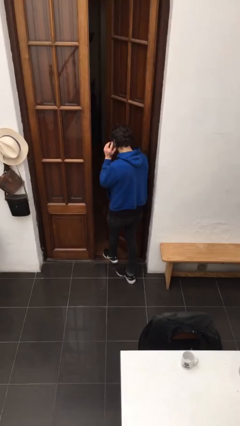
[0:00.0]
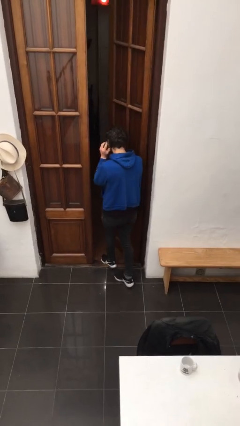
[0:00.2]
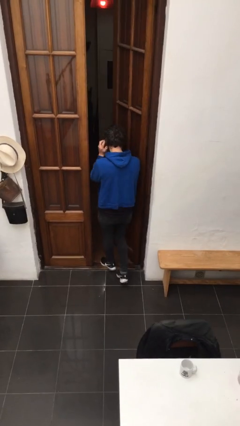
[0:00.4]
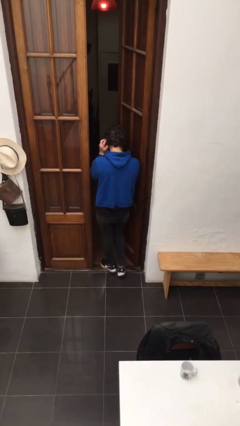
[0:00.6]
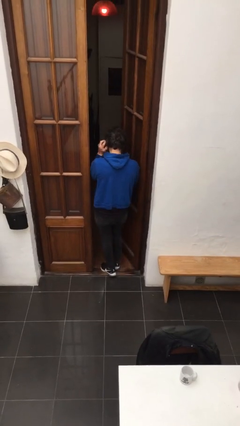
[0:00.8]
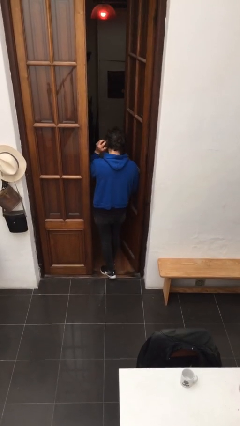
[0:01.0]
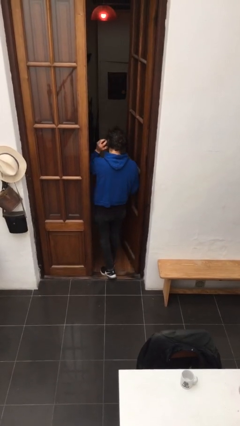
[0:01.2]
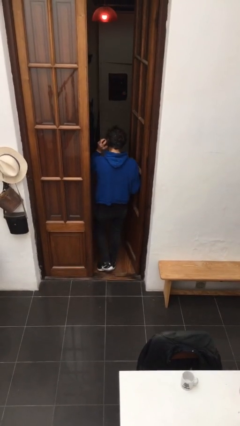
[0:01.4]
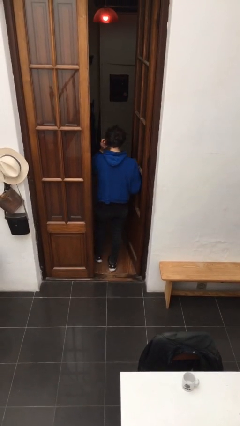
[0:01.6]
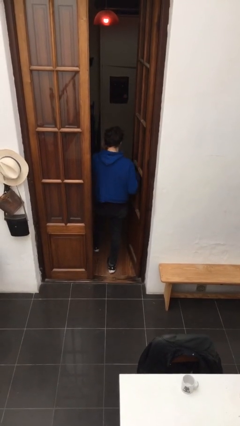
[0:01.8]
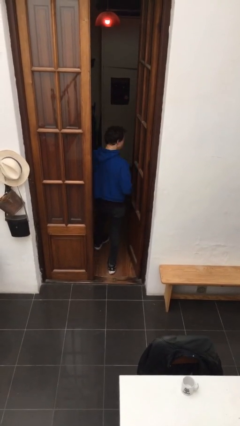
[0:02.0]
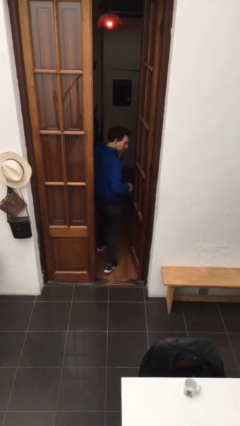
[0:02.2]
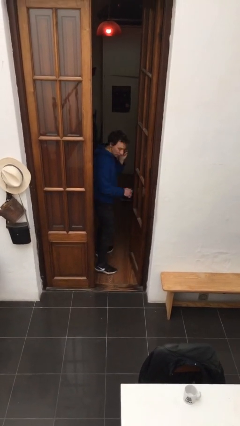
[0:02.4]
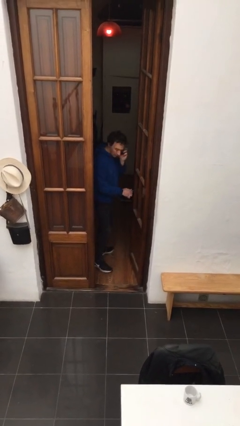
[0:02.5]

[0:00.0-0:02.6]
person exits scene through structure

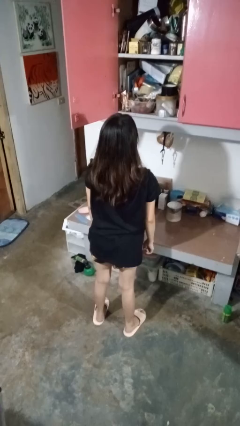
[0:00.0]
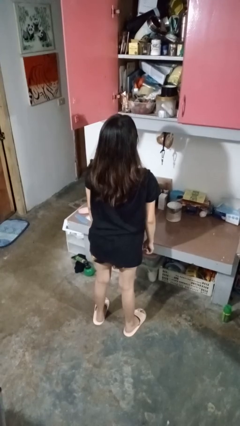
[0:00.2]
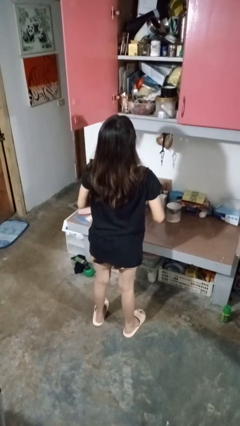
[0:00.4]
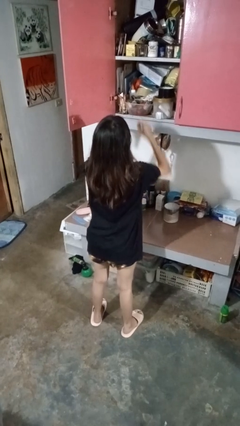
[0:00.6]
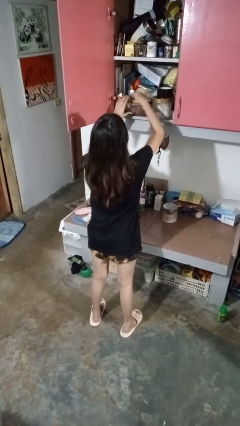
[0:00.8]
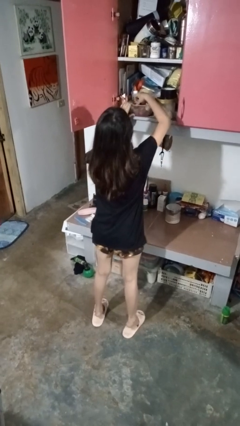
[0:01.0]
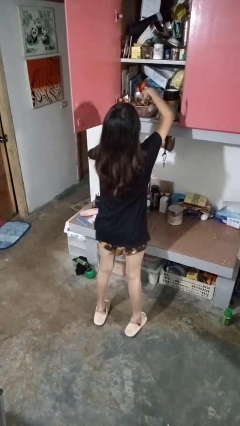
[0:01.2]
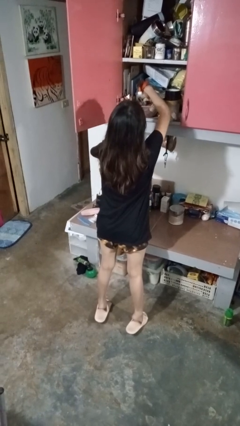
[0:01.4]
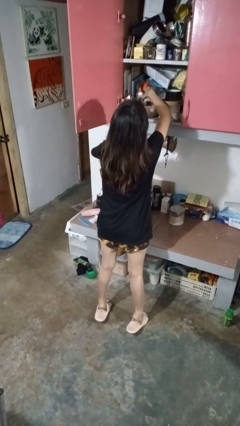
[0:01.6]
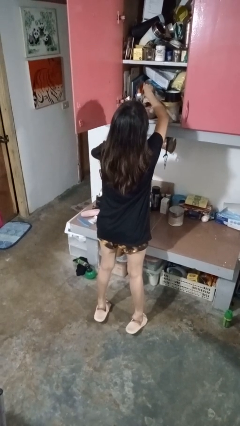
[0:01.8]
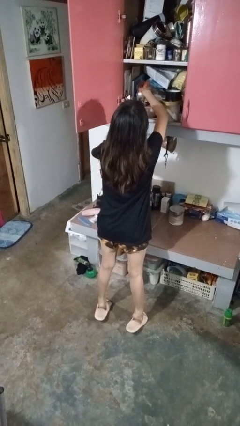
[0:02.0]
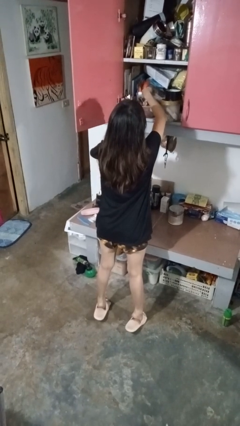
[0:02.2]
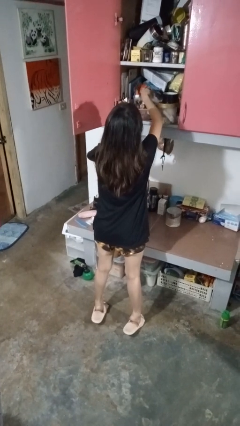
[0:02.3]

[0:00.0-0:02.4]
person searches in cabinet

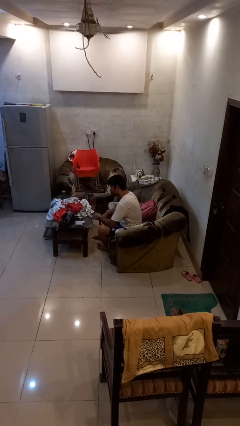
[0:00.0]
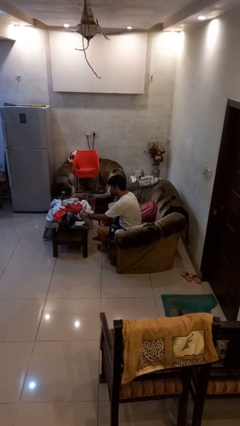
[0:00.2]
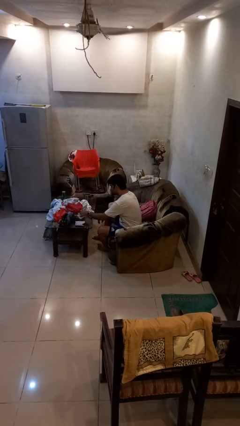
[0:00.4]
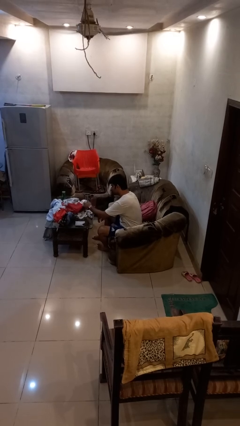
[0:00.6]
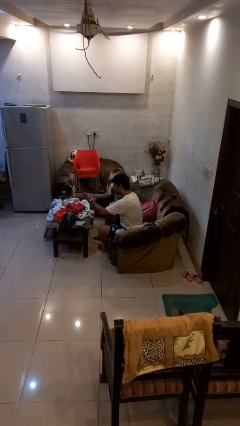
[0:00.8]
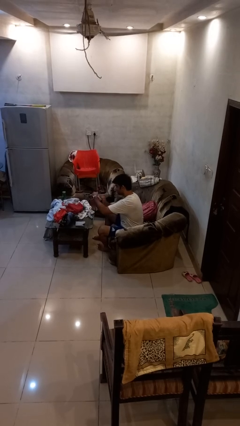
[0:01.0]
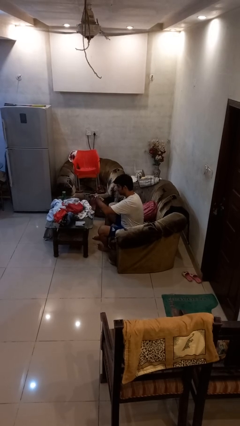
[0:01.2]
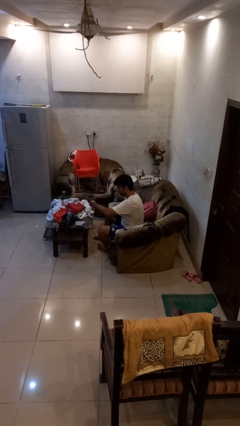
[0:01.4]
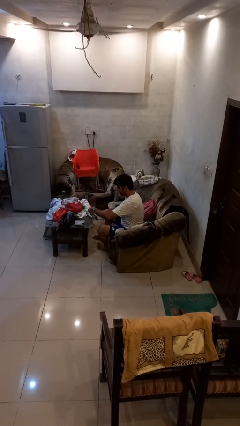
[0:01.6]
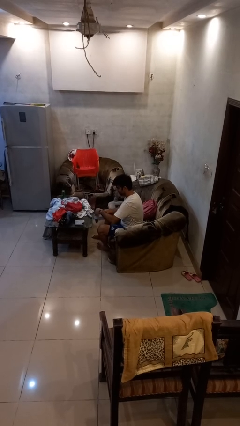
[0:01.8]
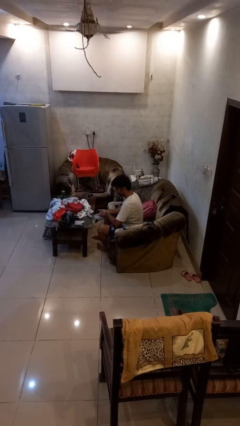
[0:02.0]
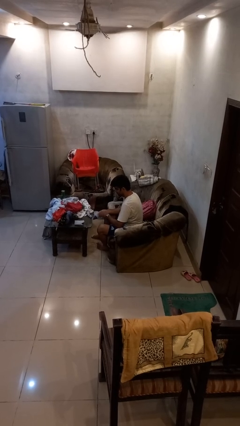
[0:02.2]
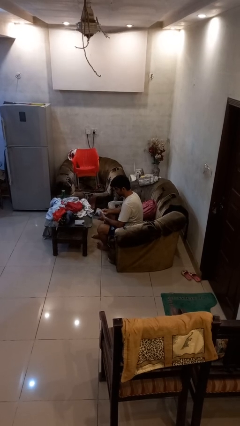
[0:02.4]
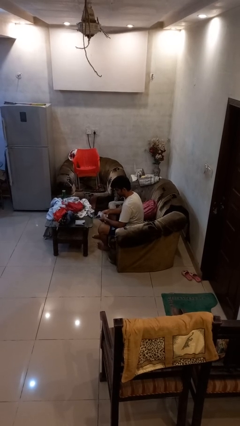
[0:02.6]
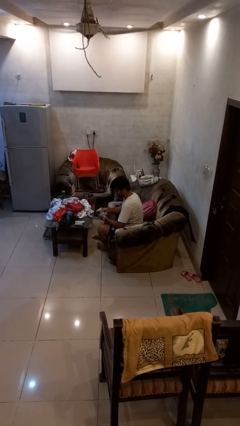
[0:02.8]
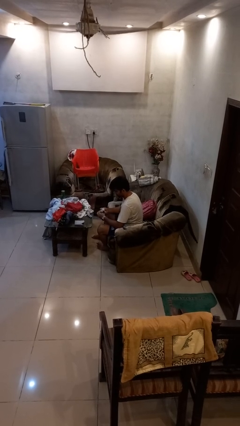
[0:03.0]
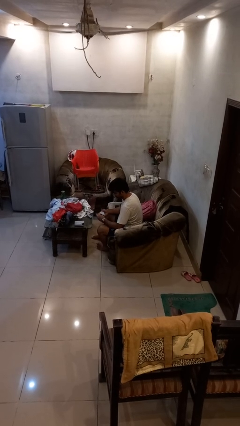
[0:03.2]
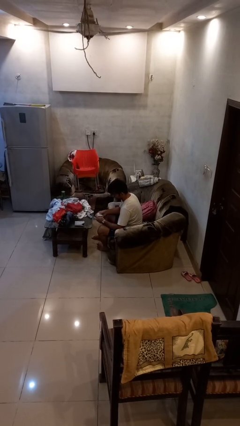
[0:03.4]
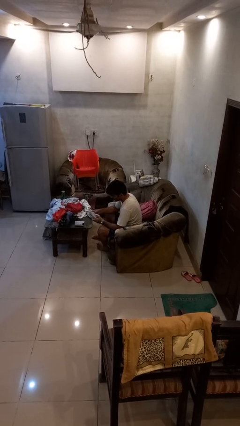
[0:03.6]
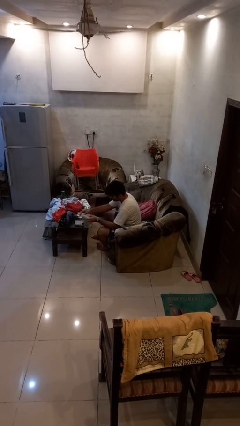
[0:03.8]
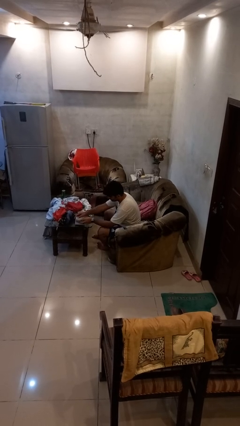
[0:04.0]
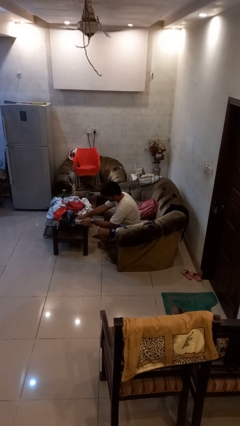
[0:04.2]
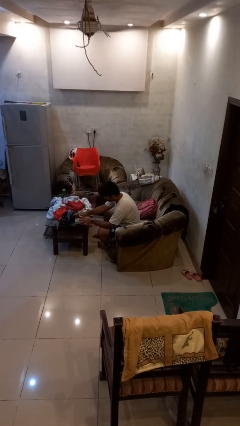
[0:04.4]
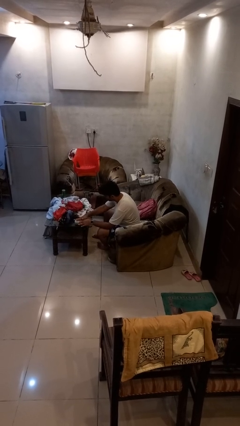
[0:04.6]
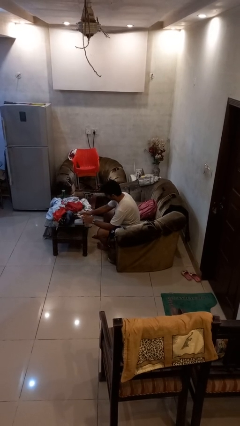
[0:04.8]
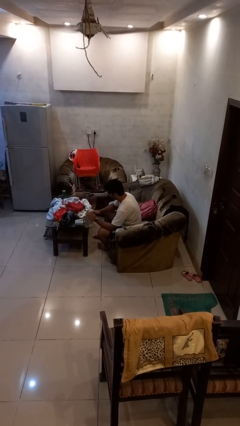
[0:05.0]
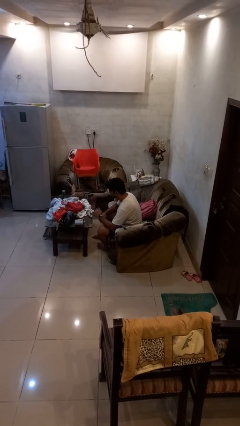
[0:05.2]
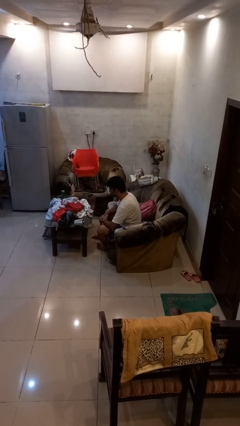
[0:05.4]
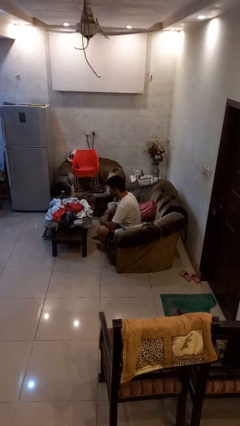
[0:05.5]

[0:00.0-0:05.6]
person folds socks

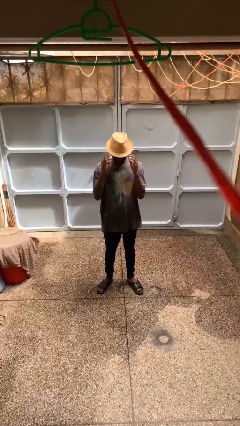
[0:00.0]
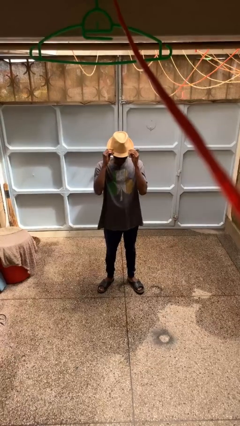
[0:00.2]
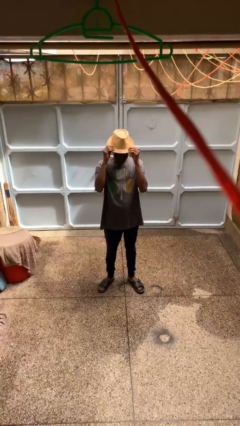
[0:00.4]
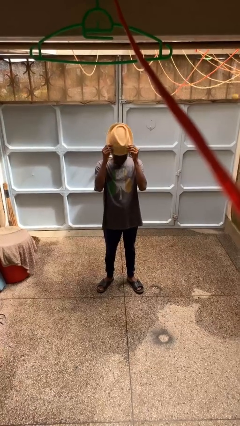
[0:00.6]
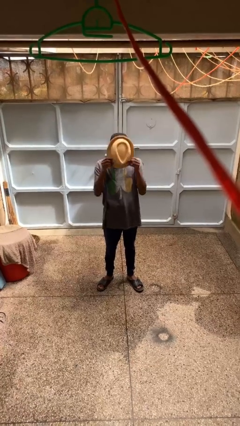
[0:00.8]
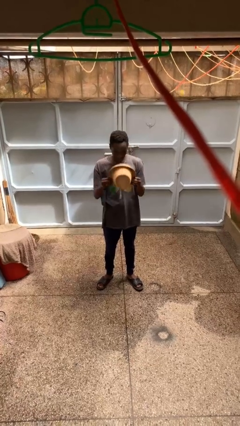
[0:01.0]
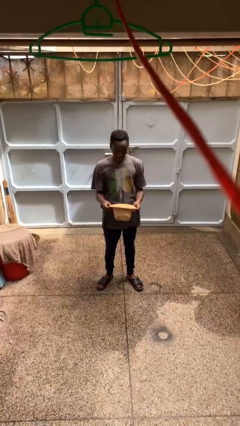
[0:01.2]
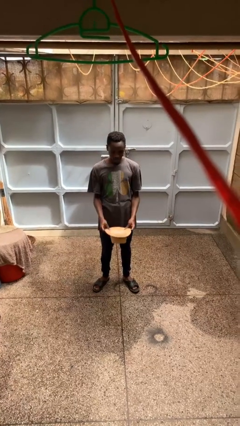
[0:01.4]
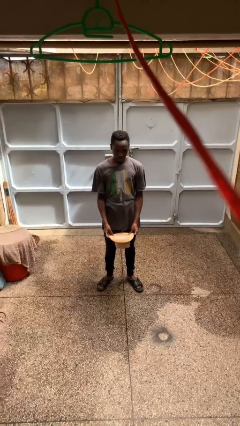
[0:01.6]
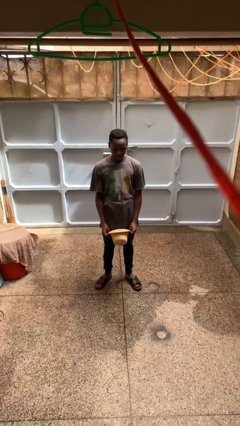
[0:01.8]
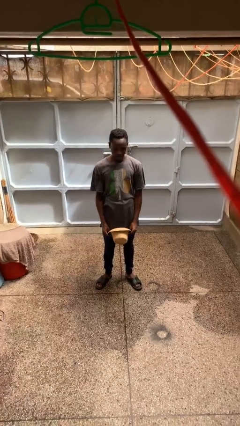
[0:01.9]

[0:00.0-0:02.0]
person takes off hat

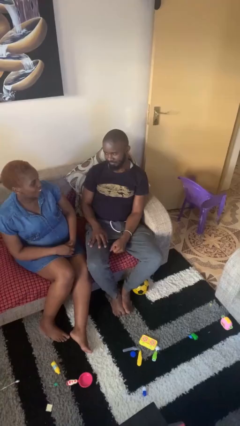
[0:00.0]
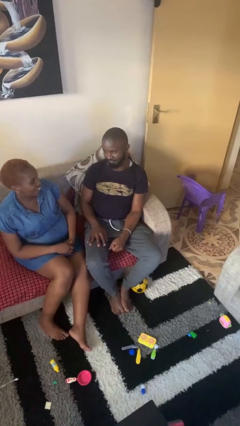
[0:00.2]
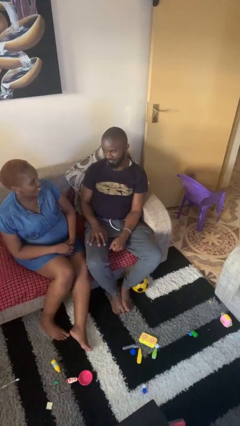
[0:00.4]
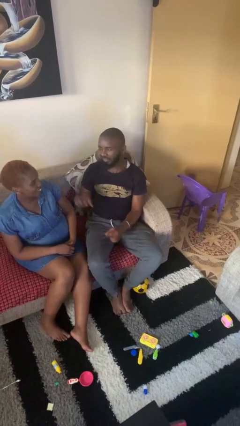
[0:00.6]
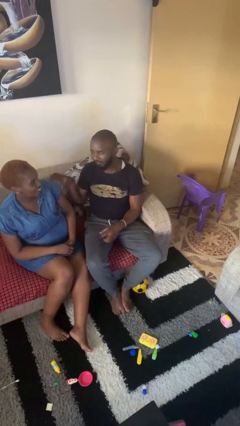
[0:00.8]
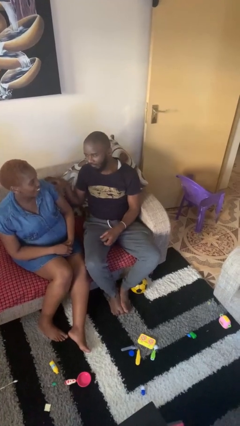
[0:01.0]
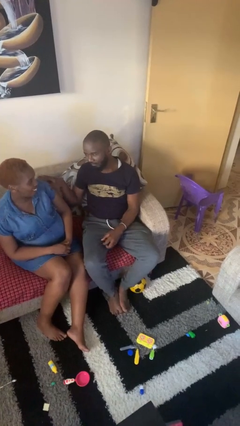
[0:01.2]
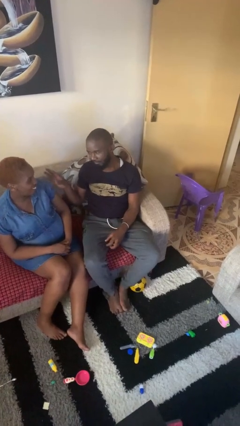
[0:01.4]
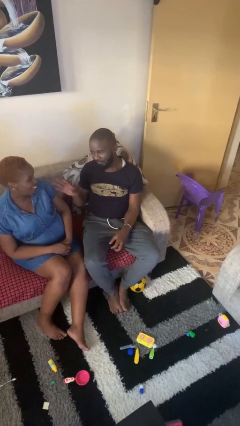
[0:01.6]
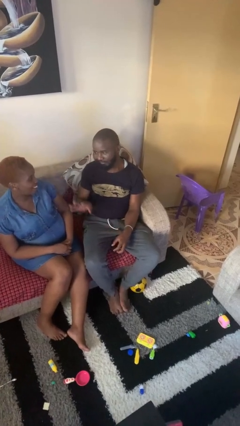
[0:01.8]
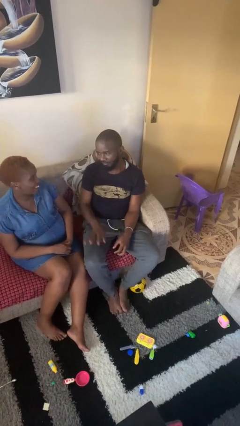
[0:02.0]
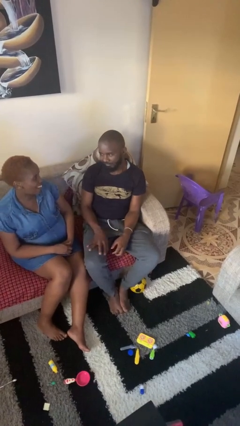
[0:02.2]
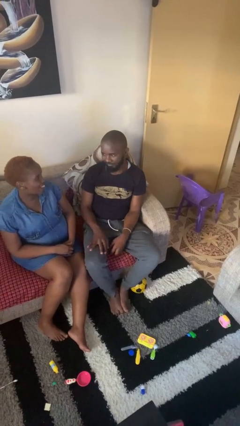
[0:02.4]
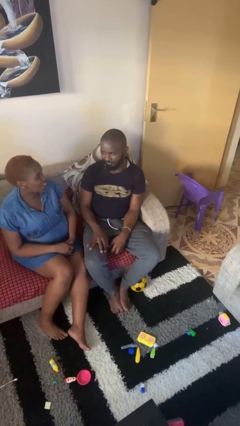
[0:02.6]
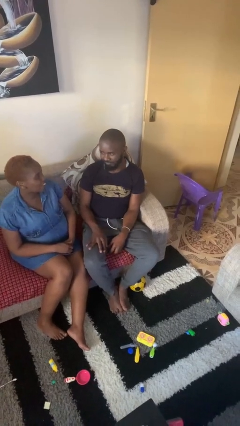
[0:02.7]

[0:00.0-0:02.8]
person shoves person

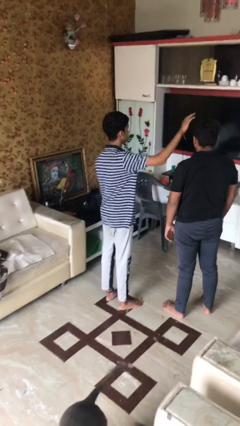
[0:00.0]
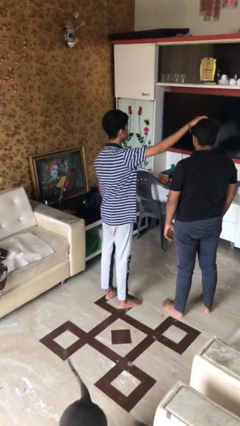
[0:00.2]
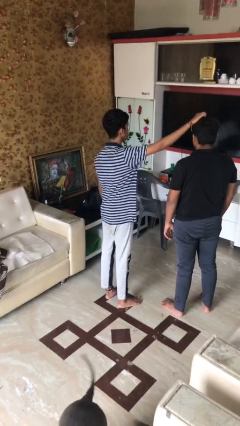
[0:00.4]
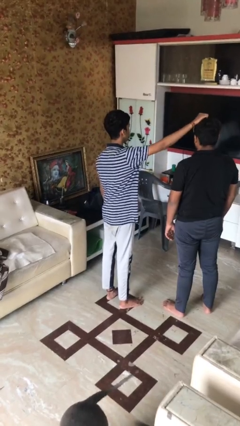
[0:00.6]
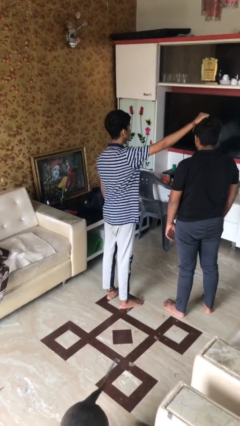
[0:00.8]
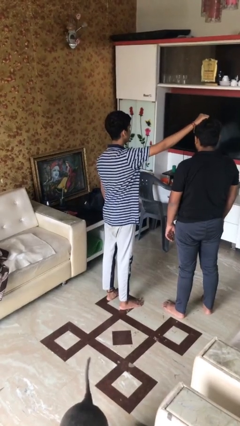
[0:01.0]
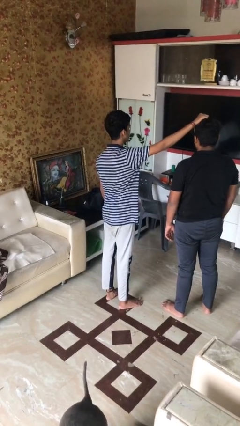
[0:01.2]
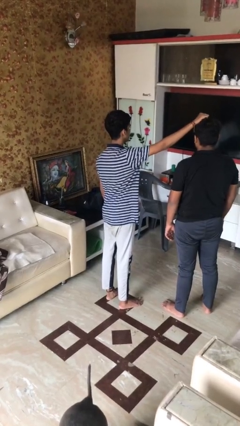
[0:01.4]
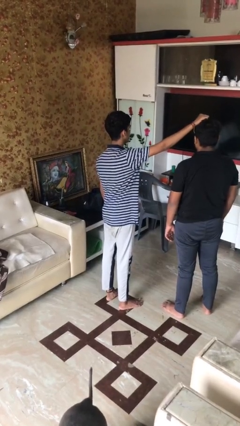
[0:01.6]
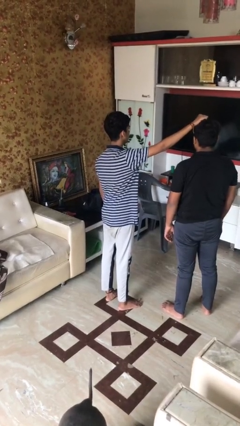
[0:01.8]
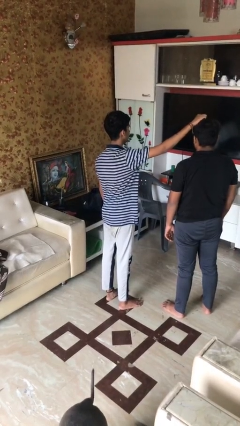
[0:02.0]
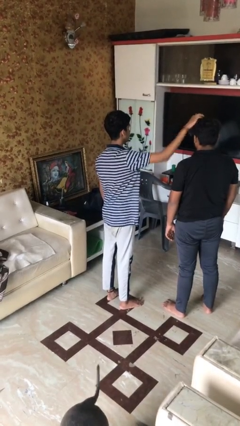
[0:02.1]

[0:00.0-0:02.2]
person grabs person by hair
